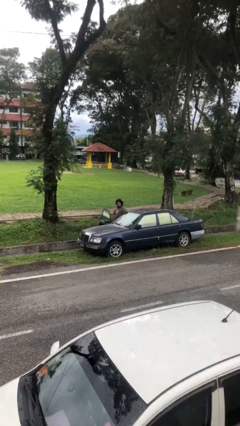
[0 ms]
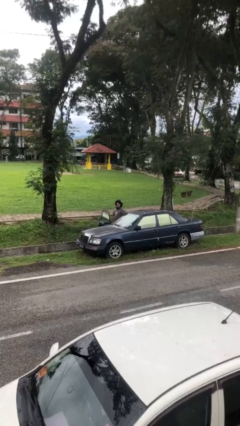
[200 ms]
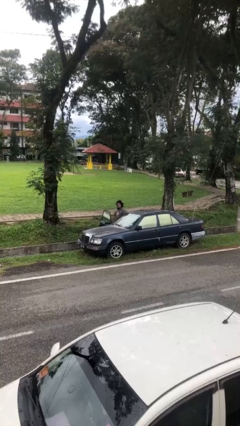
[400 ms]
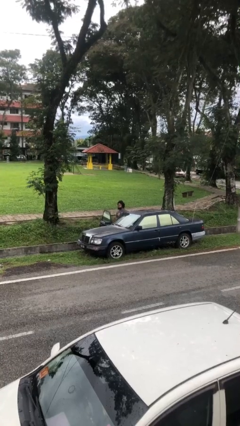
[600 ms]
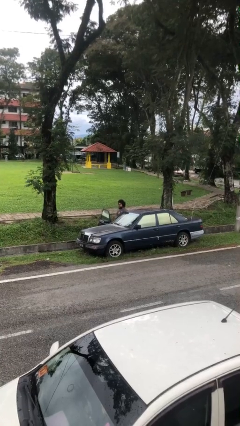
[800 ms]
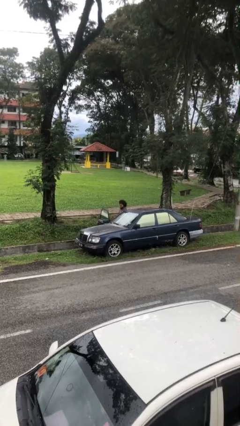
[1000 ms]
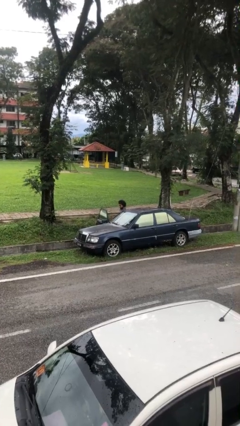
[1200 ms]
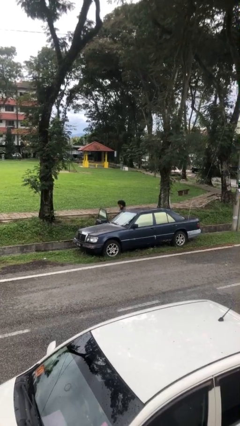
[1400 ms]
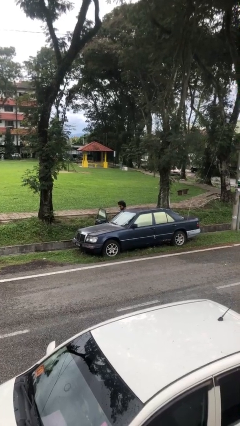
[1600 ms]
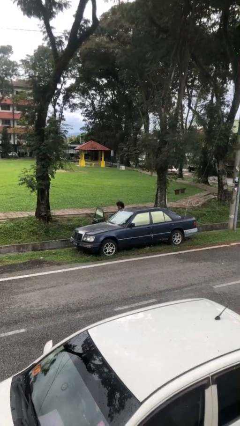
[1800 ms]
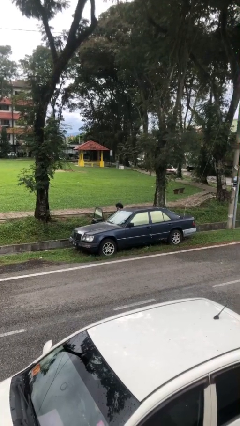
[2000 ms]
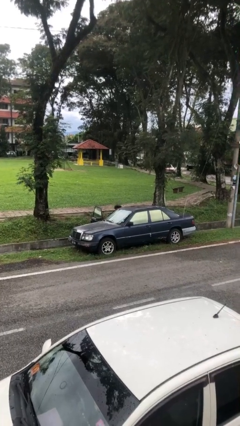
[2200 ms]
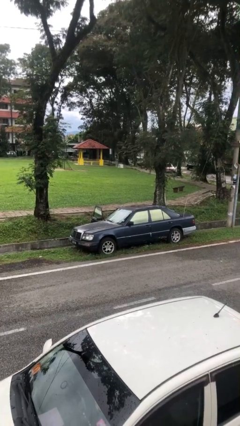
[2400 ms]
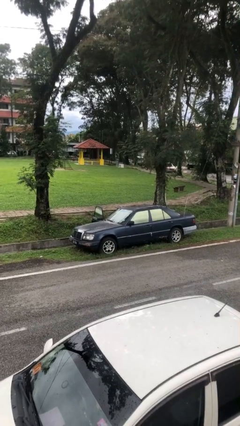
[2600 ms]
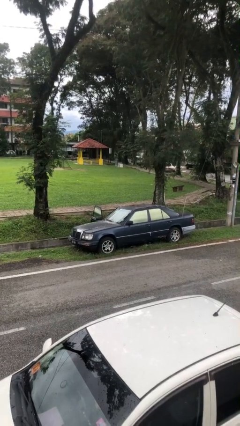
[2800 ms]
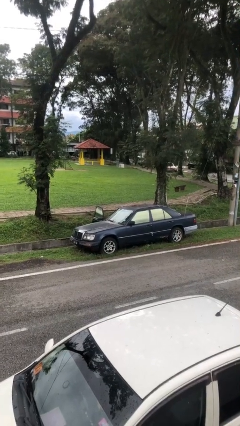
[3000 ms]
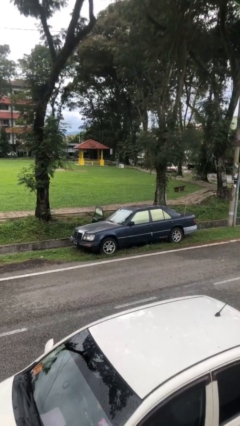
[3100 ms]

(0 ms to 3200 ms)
person enters car

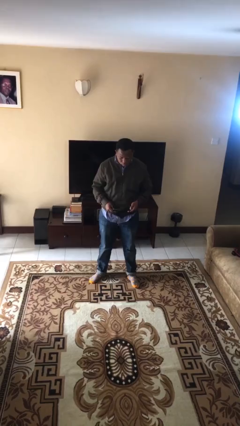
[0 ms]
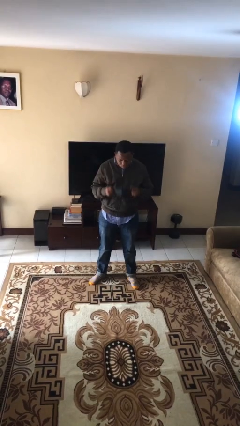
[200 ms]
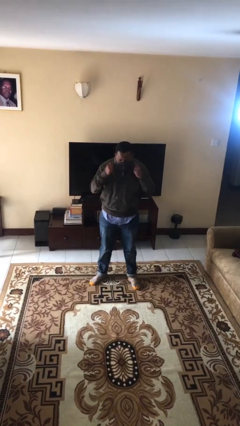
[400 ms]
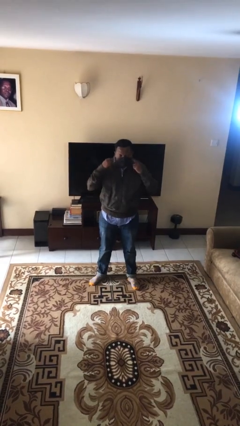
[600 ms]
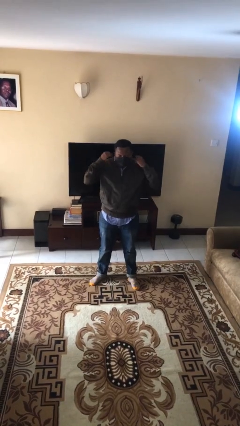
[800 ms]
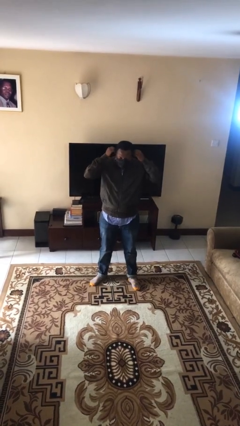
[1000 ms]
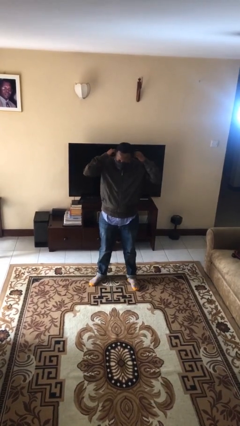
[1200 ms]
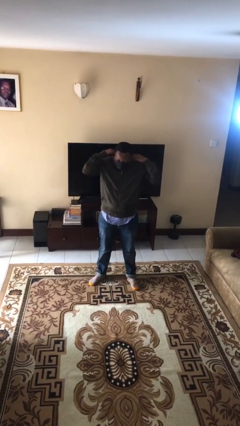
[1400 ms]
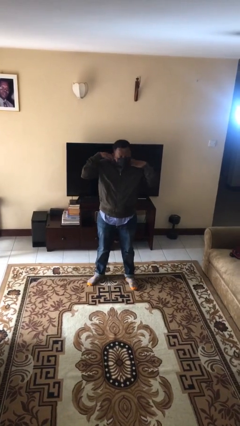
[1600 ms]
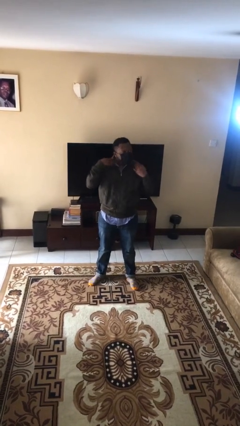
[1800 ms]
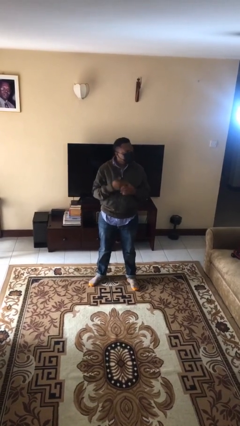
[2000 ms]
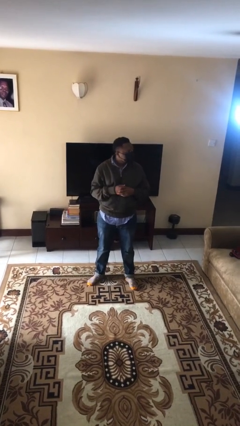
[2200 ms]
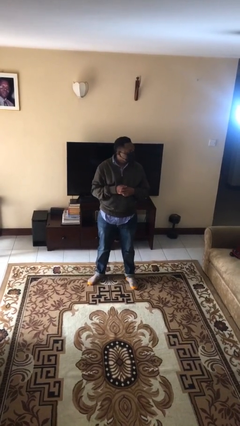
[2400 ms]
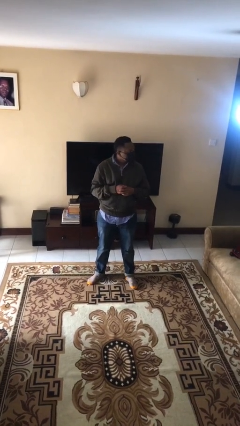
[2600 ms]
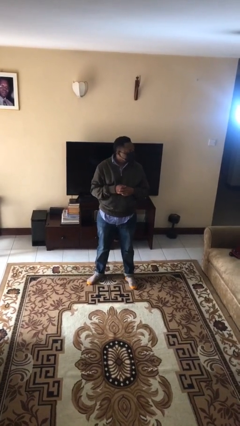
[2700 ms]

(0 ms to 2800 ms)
person puts on facemask

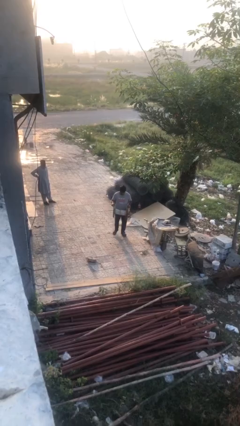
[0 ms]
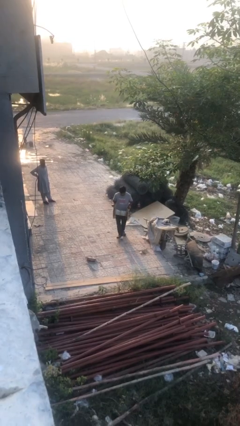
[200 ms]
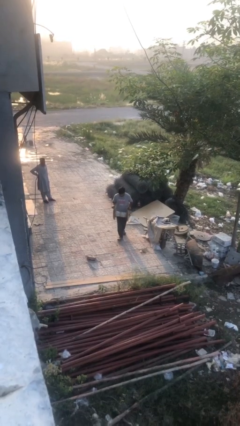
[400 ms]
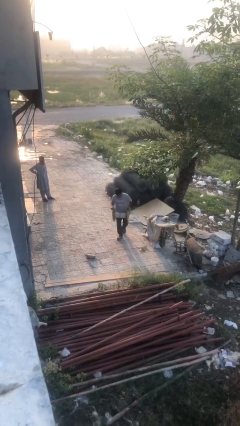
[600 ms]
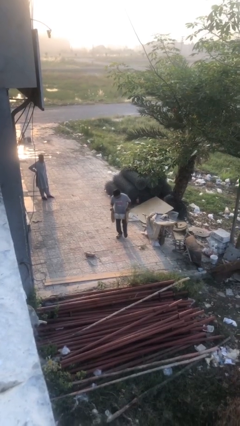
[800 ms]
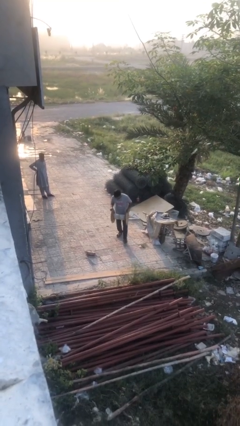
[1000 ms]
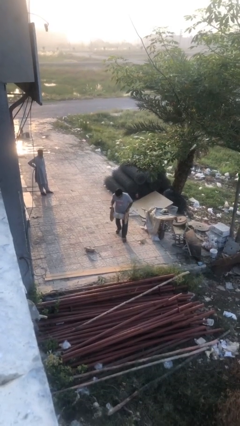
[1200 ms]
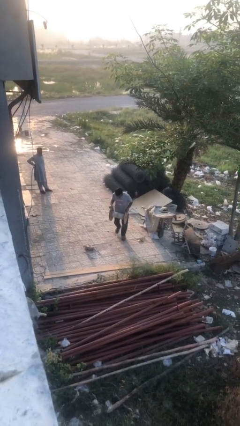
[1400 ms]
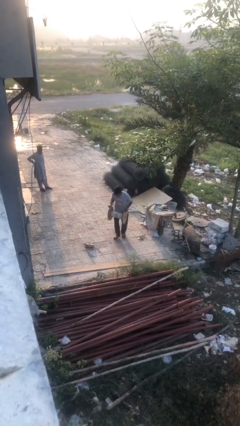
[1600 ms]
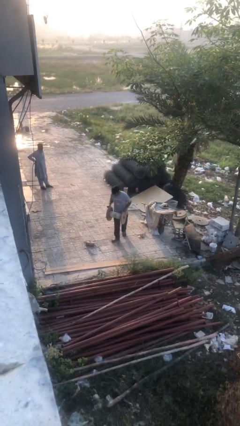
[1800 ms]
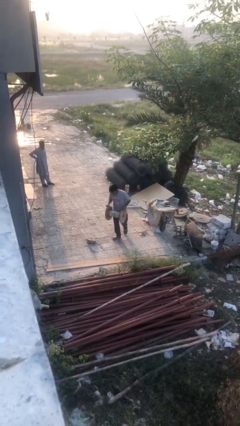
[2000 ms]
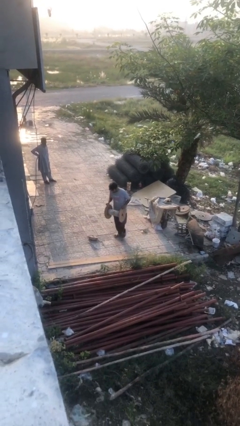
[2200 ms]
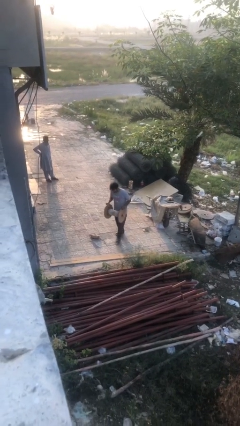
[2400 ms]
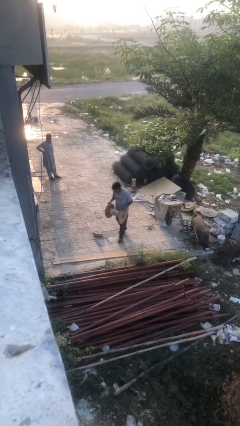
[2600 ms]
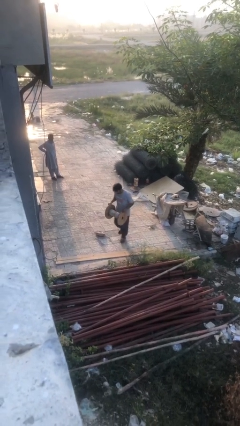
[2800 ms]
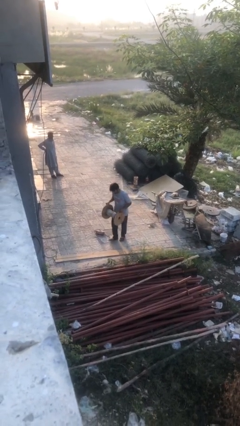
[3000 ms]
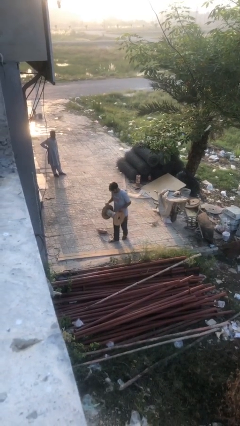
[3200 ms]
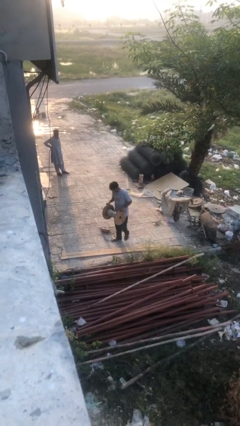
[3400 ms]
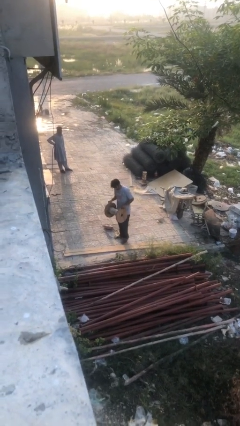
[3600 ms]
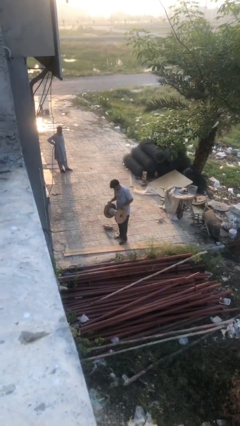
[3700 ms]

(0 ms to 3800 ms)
person carries heavy object

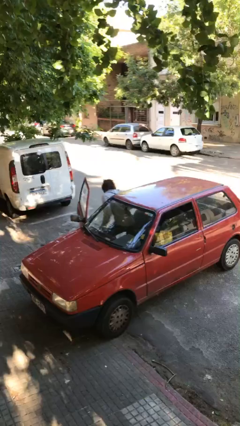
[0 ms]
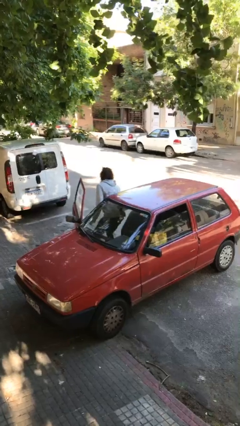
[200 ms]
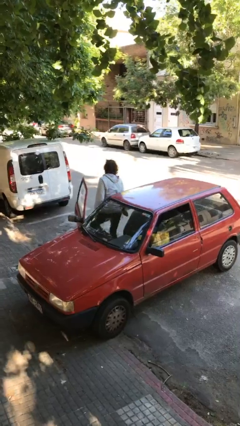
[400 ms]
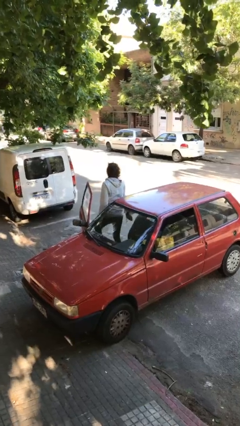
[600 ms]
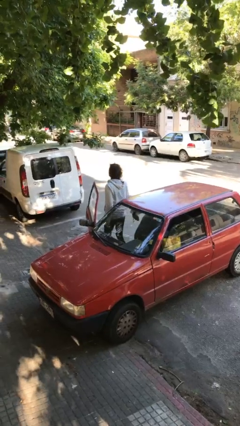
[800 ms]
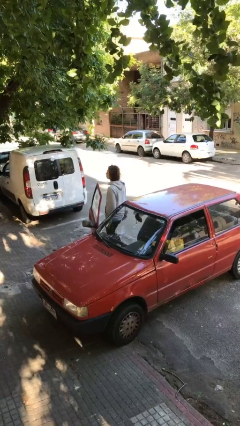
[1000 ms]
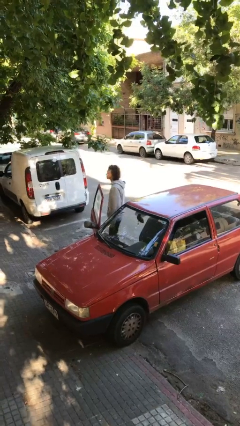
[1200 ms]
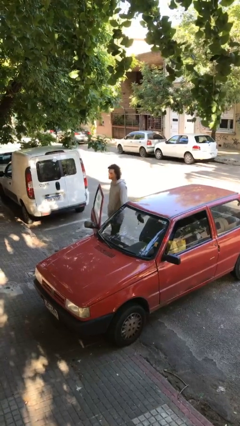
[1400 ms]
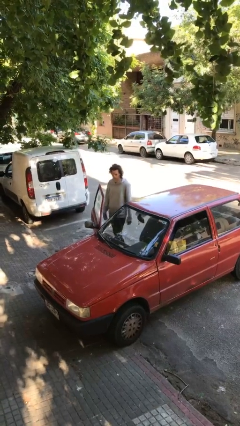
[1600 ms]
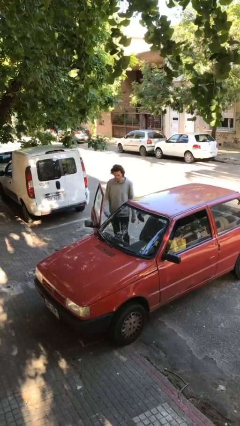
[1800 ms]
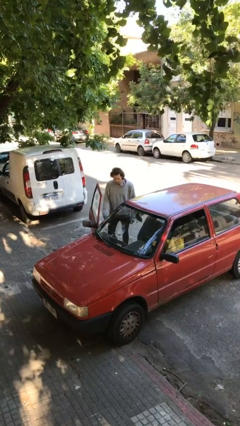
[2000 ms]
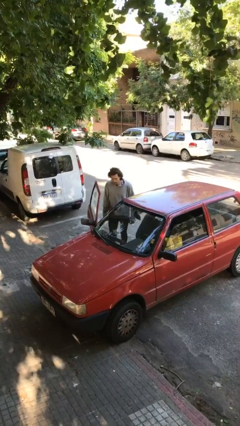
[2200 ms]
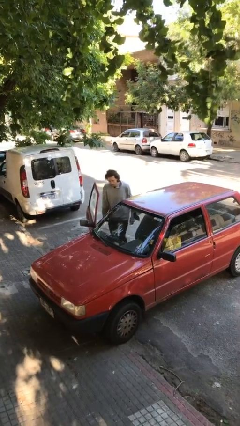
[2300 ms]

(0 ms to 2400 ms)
person exits car

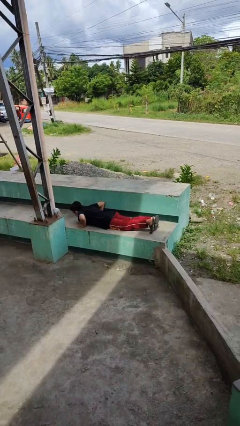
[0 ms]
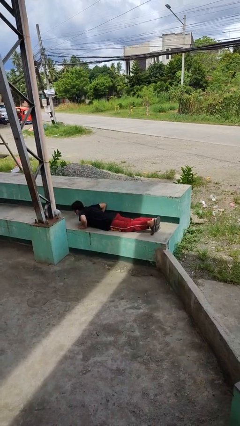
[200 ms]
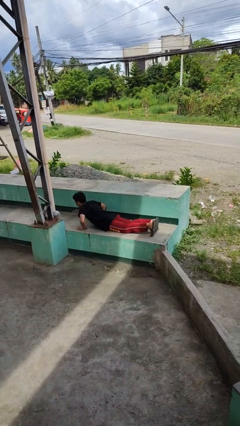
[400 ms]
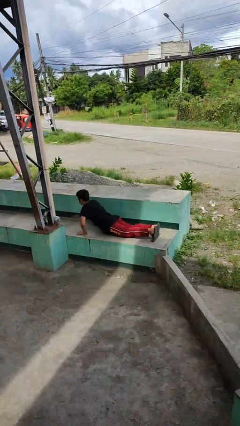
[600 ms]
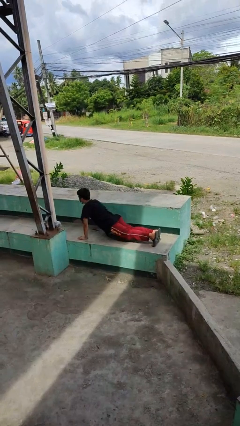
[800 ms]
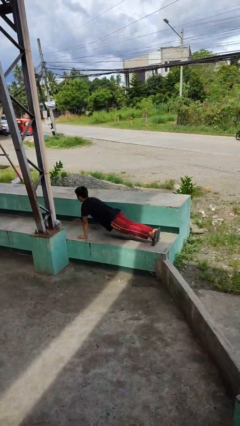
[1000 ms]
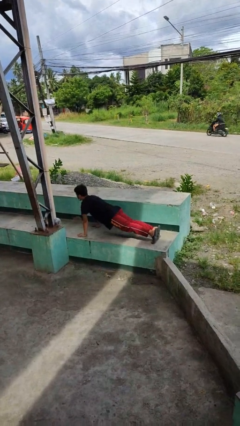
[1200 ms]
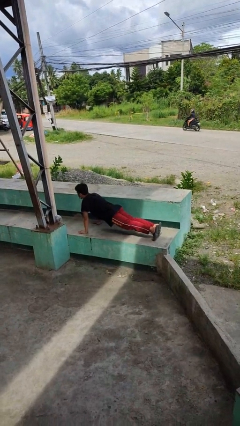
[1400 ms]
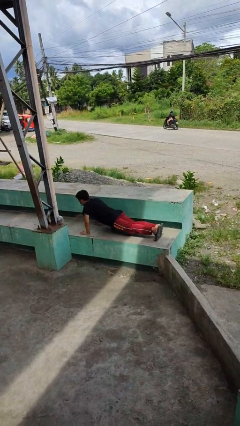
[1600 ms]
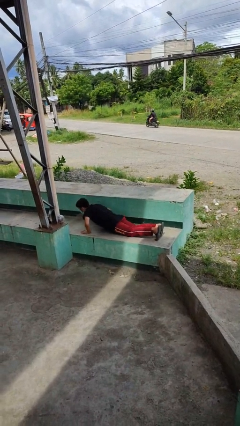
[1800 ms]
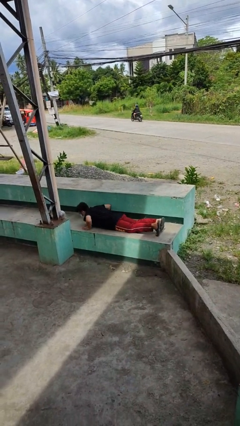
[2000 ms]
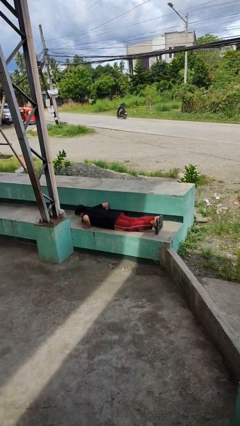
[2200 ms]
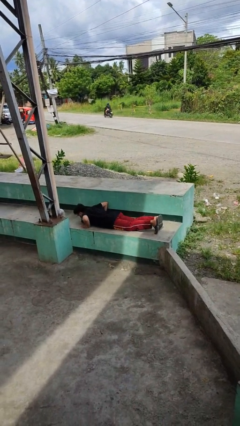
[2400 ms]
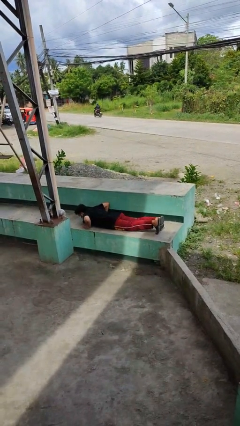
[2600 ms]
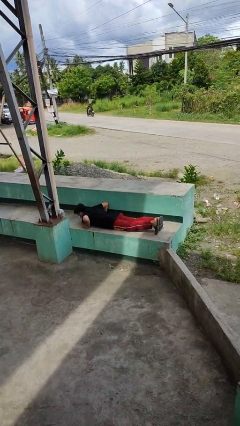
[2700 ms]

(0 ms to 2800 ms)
person exercises with pushup

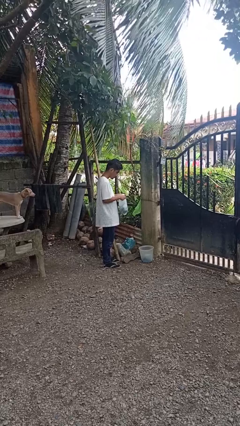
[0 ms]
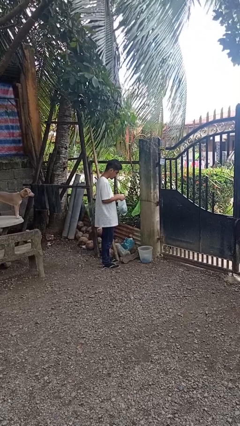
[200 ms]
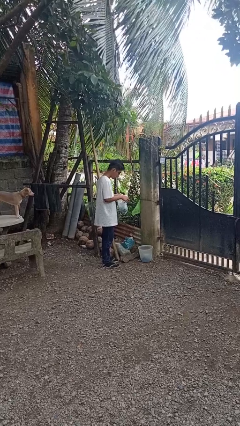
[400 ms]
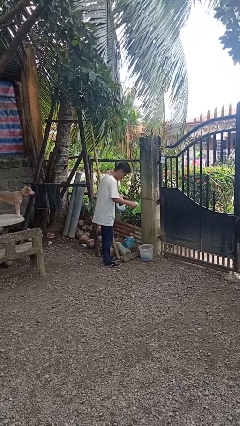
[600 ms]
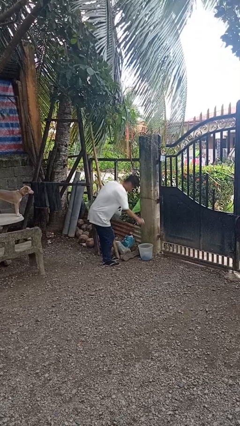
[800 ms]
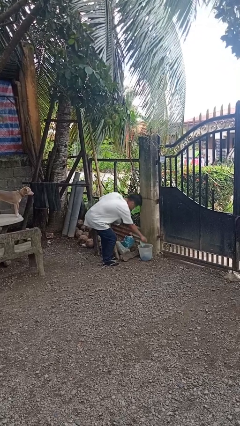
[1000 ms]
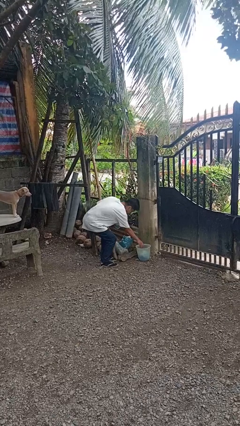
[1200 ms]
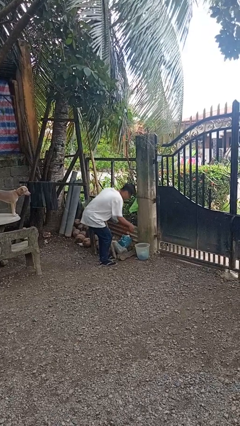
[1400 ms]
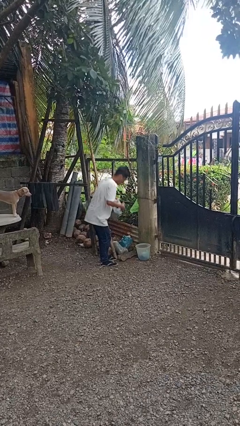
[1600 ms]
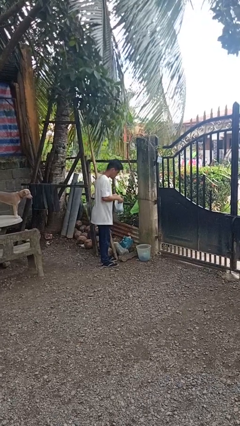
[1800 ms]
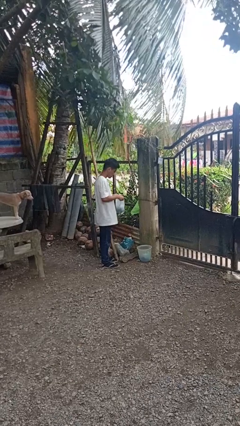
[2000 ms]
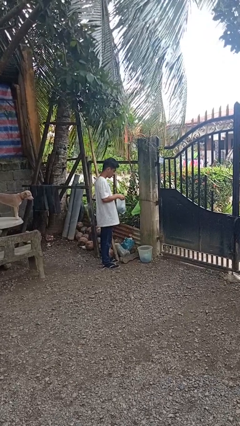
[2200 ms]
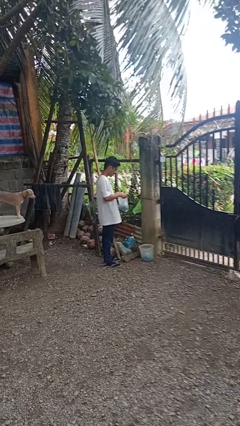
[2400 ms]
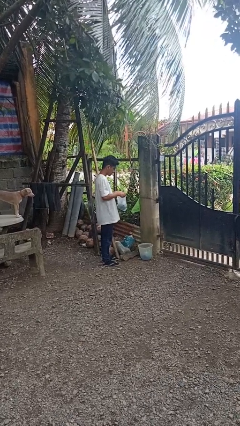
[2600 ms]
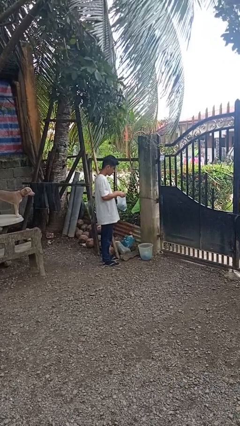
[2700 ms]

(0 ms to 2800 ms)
person discards trash
